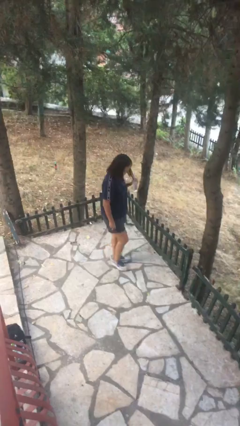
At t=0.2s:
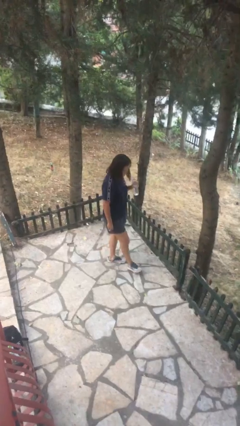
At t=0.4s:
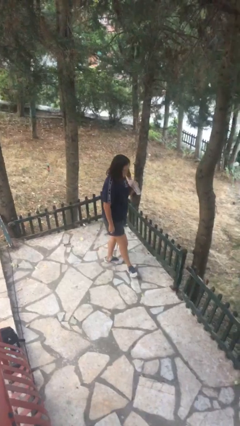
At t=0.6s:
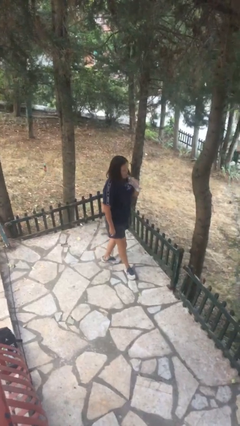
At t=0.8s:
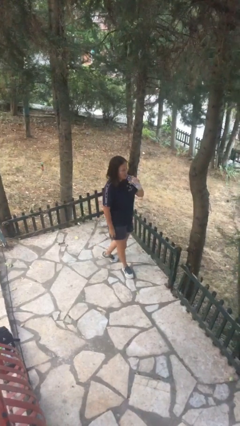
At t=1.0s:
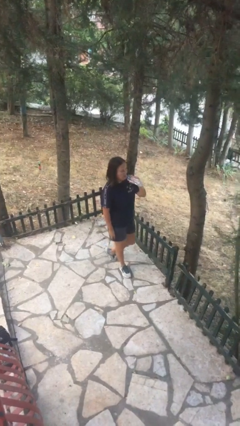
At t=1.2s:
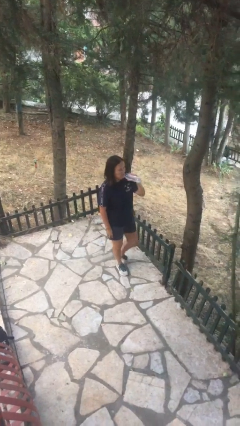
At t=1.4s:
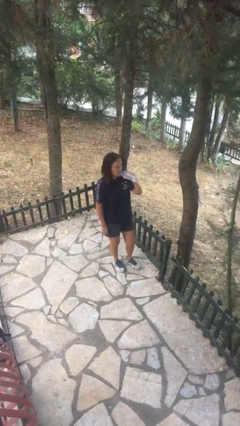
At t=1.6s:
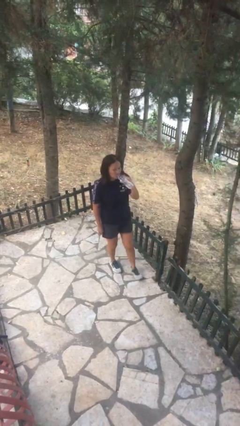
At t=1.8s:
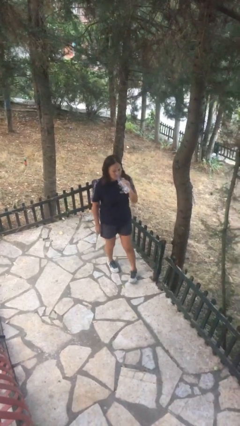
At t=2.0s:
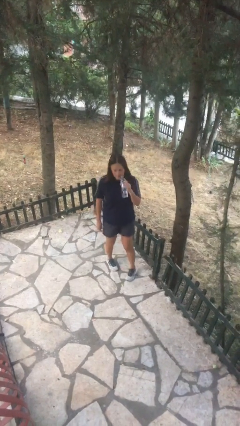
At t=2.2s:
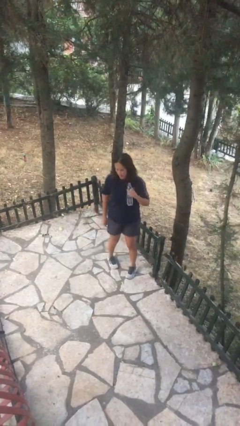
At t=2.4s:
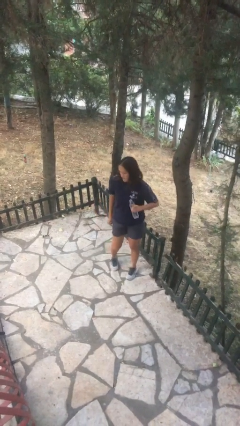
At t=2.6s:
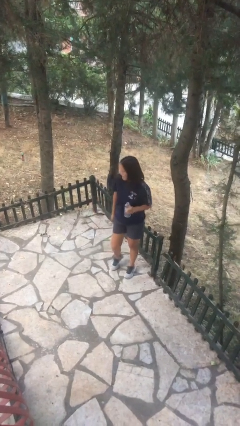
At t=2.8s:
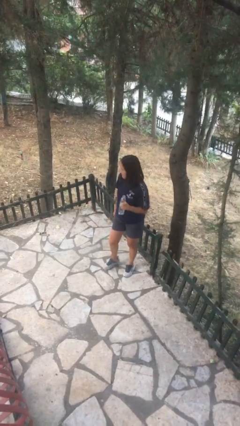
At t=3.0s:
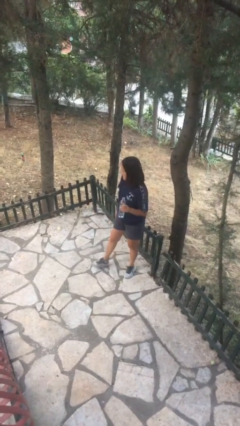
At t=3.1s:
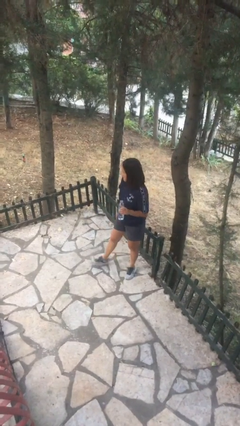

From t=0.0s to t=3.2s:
person drinks from bottle

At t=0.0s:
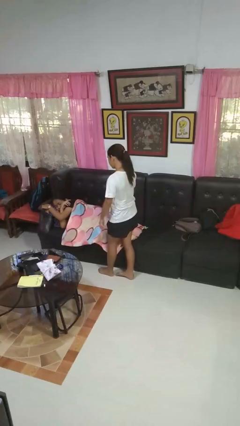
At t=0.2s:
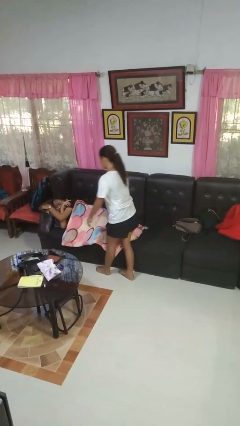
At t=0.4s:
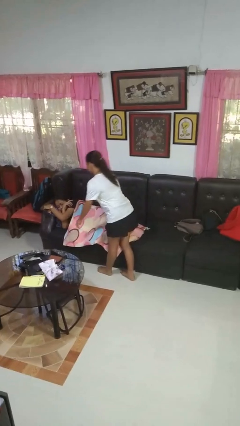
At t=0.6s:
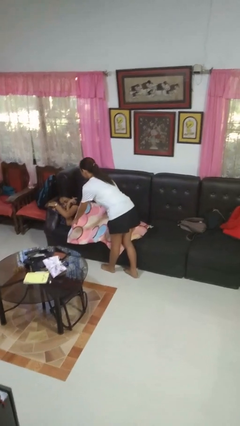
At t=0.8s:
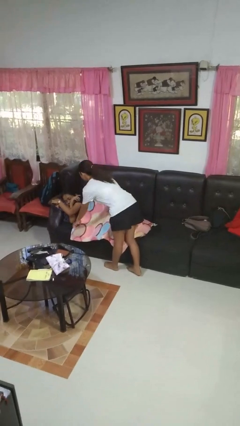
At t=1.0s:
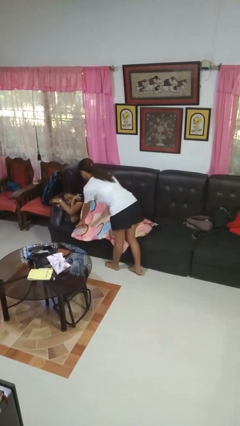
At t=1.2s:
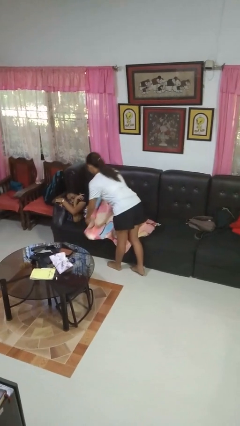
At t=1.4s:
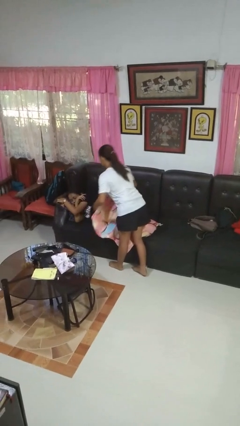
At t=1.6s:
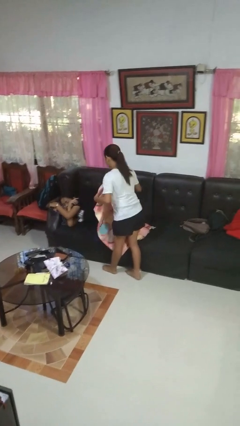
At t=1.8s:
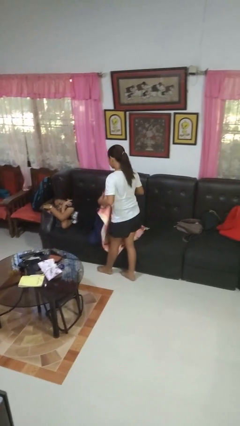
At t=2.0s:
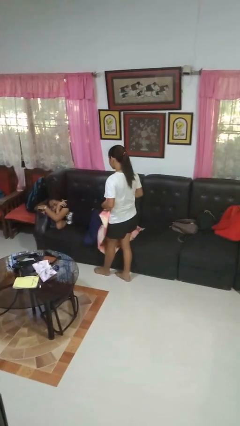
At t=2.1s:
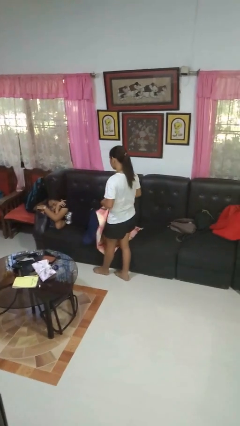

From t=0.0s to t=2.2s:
person uncovers friend with blanket

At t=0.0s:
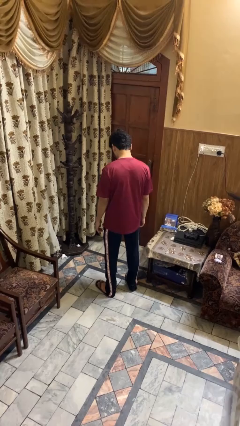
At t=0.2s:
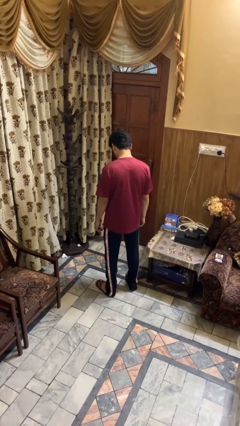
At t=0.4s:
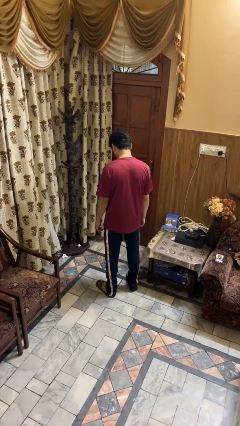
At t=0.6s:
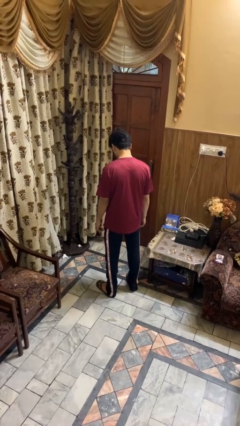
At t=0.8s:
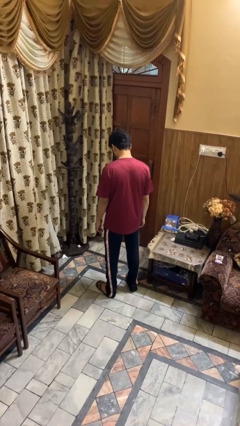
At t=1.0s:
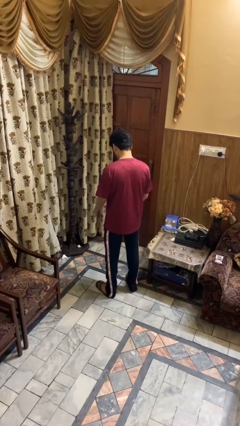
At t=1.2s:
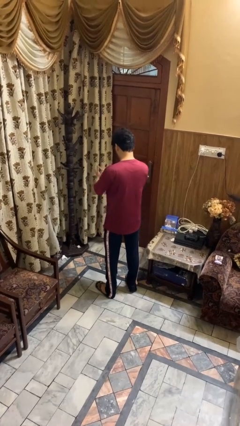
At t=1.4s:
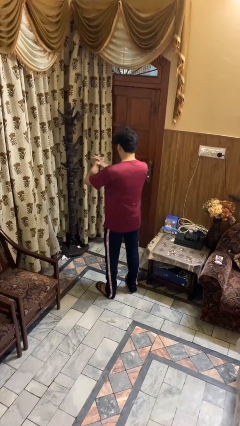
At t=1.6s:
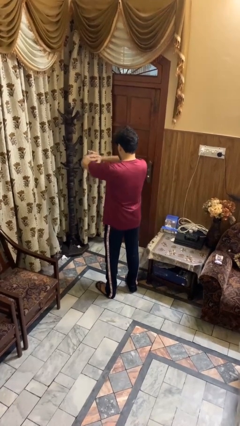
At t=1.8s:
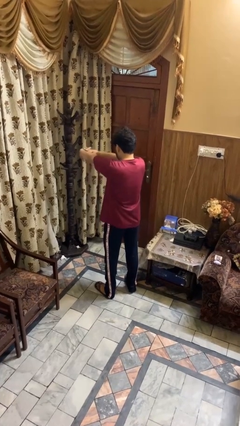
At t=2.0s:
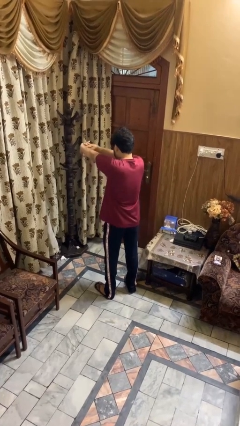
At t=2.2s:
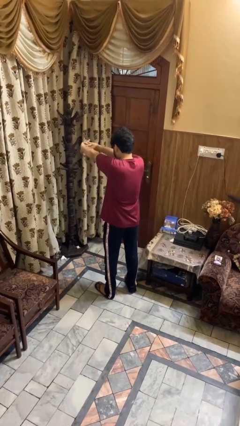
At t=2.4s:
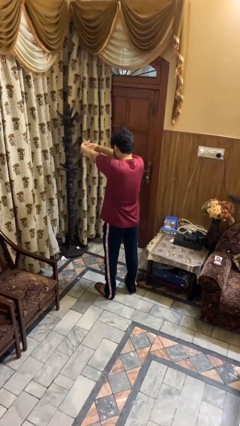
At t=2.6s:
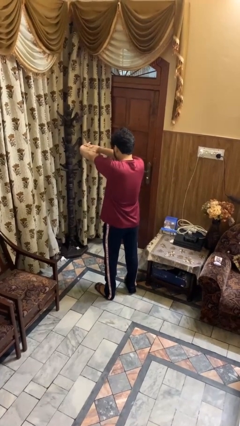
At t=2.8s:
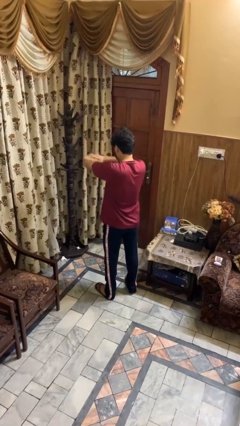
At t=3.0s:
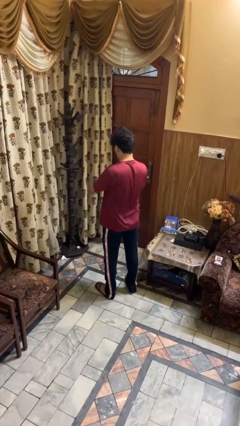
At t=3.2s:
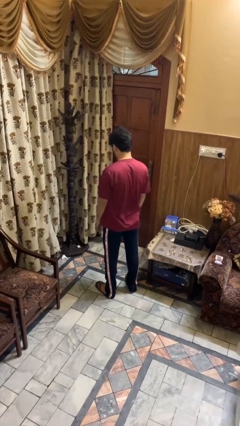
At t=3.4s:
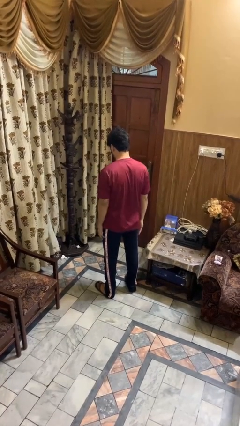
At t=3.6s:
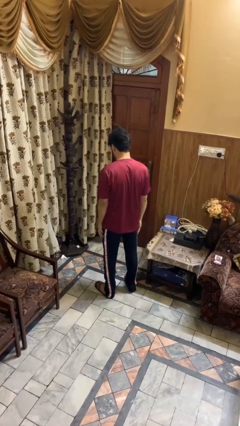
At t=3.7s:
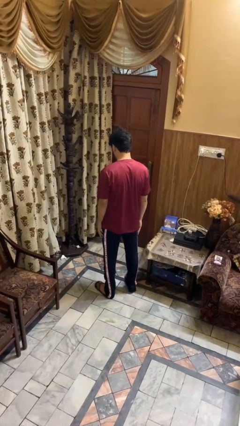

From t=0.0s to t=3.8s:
person cracks knuckles

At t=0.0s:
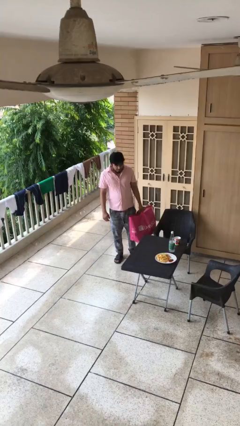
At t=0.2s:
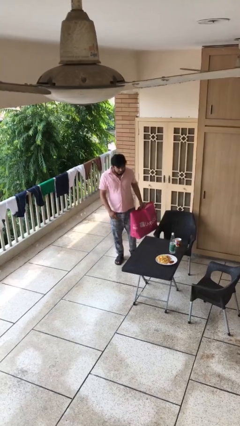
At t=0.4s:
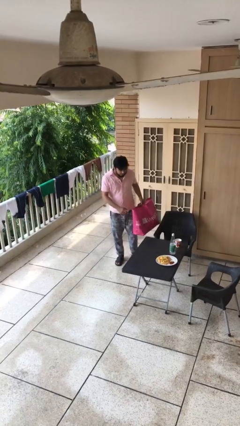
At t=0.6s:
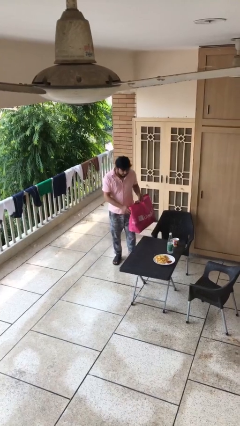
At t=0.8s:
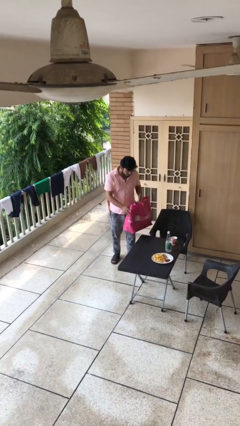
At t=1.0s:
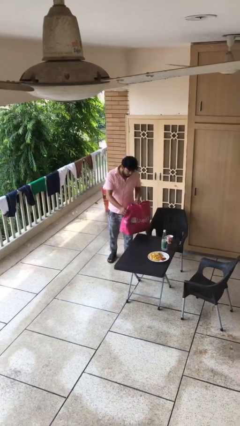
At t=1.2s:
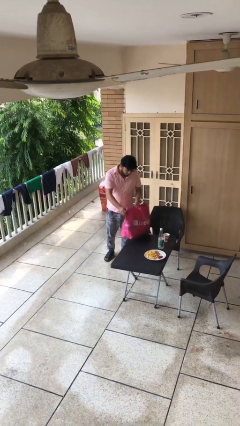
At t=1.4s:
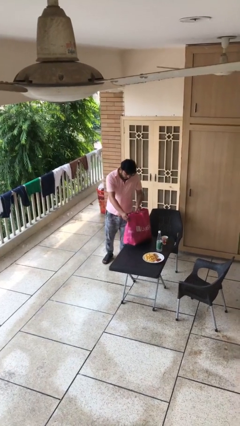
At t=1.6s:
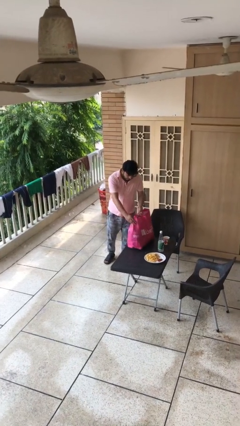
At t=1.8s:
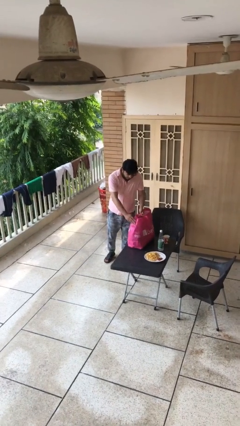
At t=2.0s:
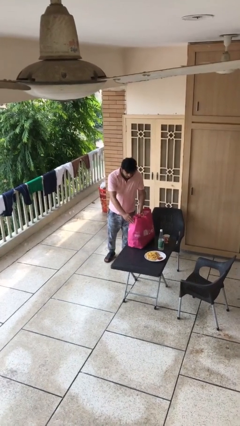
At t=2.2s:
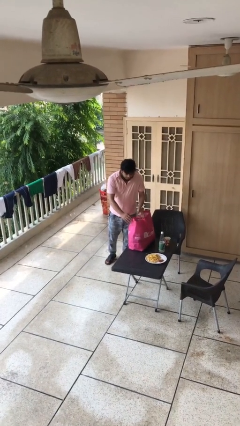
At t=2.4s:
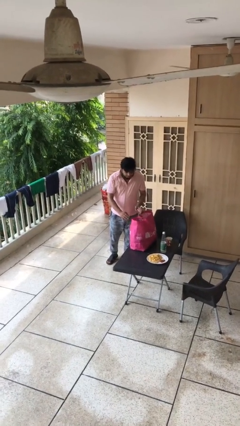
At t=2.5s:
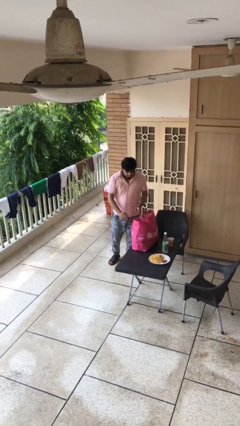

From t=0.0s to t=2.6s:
person puts down object on table

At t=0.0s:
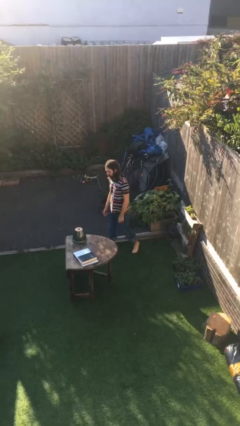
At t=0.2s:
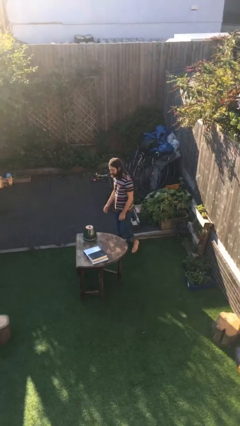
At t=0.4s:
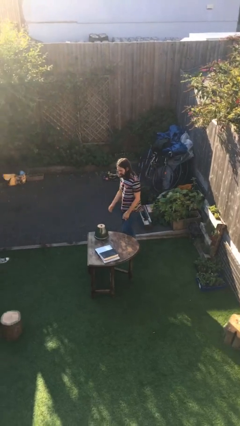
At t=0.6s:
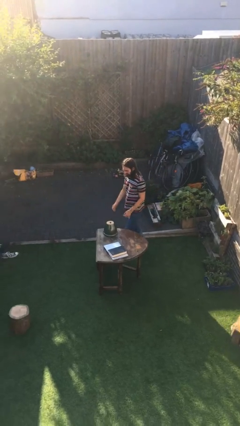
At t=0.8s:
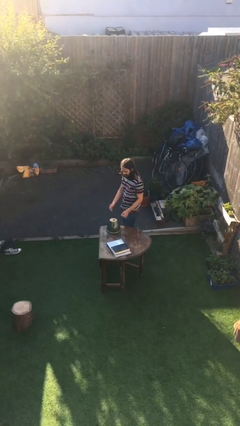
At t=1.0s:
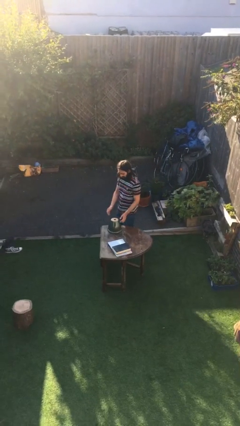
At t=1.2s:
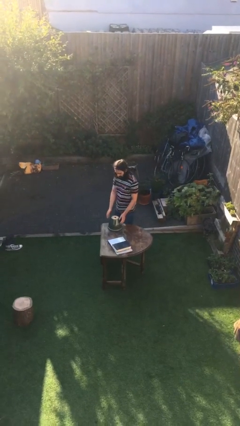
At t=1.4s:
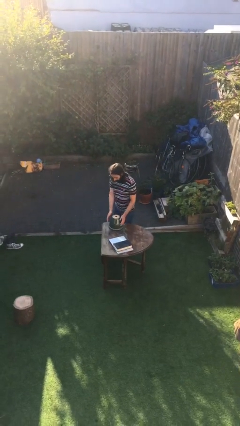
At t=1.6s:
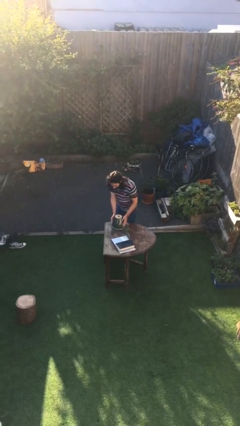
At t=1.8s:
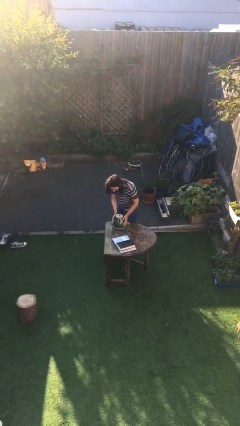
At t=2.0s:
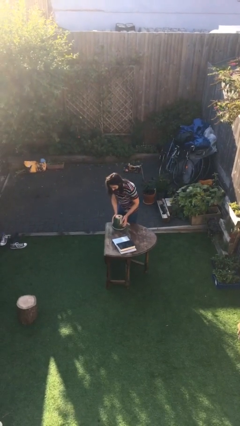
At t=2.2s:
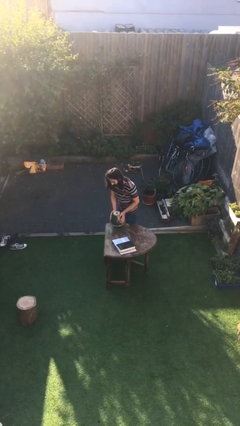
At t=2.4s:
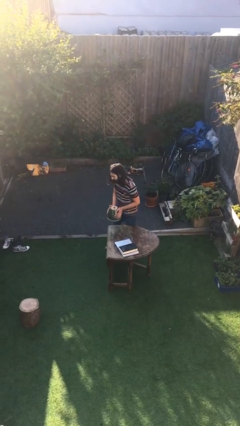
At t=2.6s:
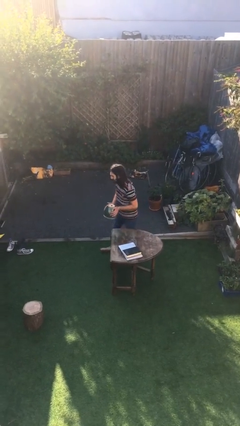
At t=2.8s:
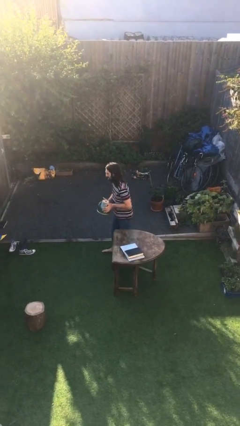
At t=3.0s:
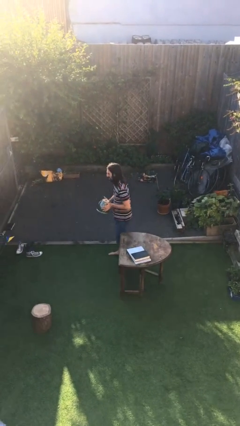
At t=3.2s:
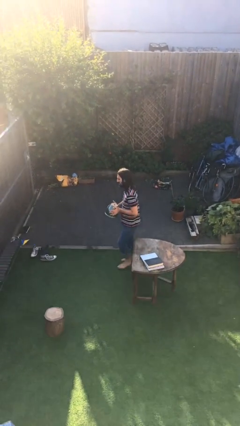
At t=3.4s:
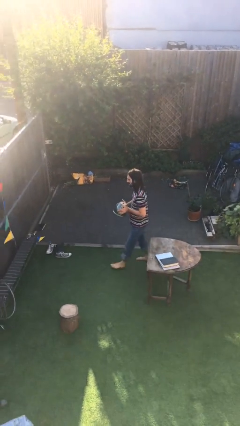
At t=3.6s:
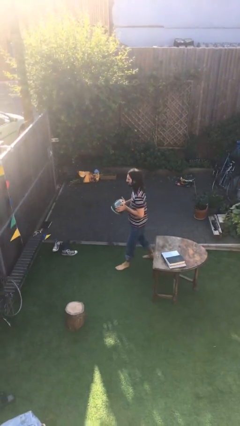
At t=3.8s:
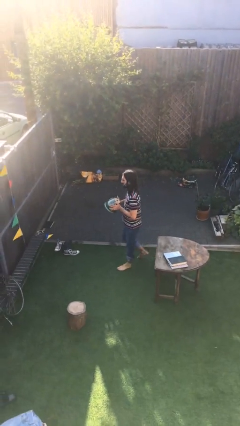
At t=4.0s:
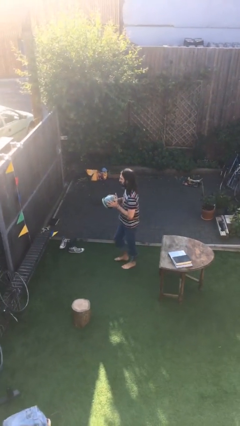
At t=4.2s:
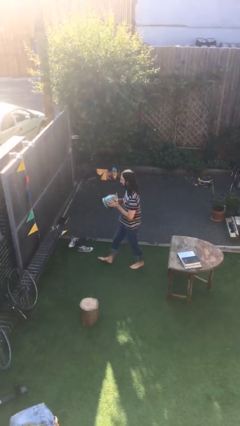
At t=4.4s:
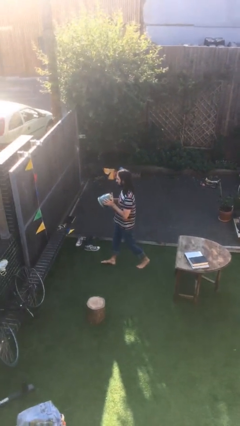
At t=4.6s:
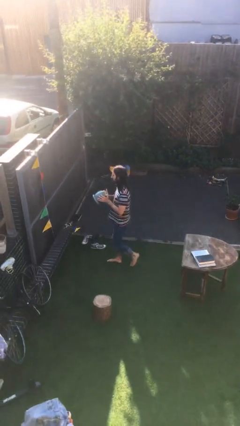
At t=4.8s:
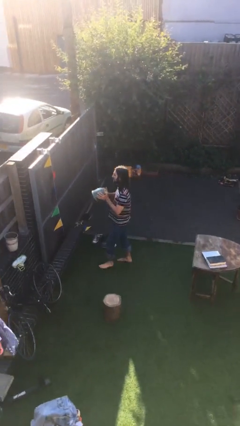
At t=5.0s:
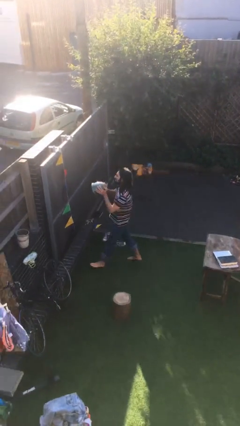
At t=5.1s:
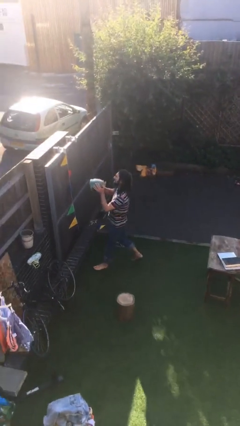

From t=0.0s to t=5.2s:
person picks up object from table

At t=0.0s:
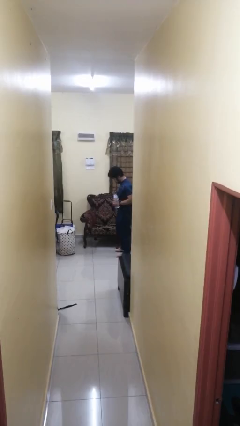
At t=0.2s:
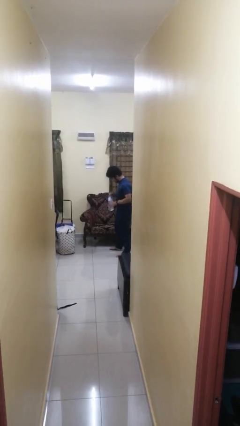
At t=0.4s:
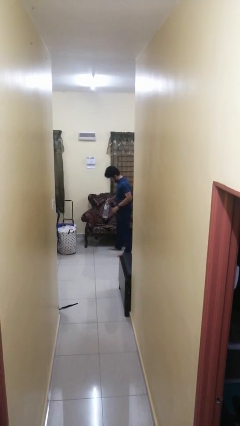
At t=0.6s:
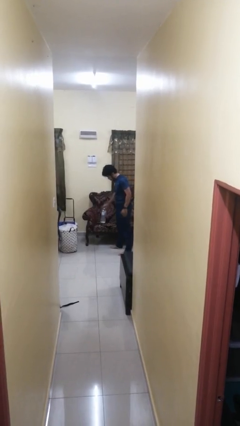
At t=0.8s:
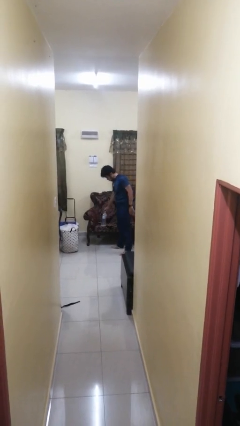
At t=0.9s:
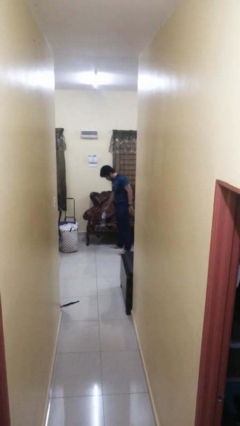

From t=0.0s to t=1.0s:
person puts down object on couch
